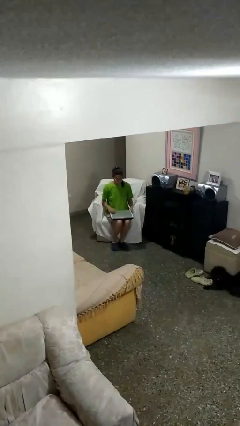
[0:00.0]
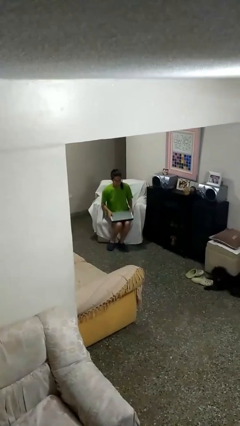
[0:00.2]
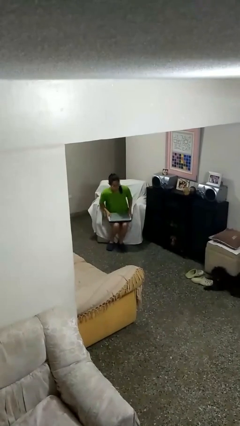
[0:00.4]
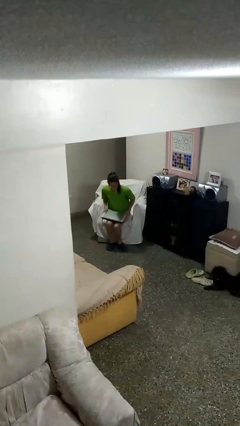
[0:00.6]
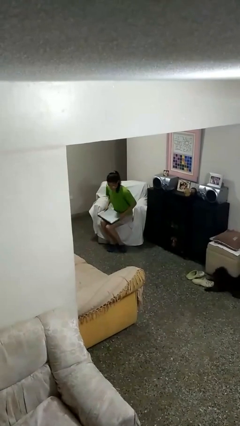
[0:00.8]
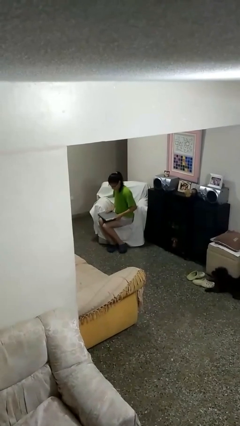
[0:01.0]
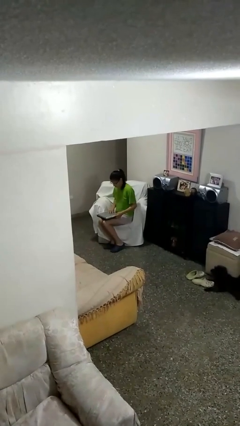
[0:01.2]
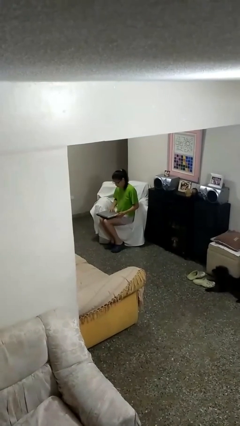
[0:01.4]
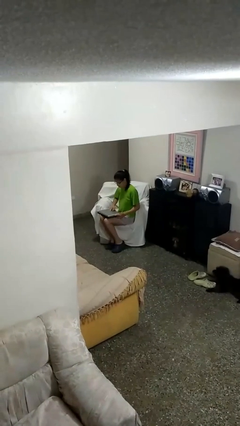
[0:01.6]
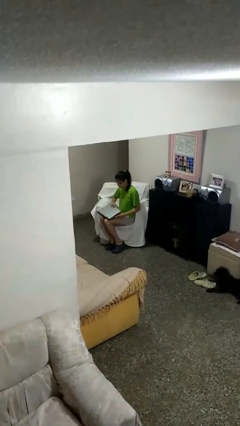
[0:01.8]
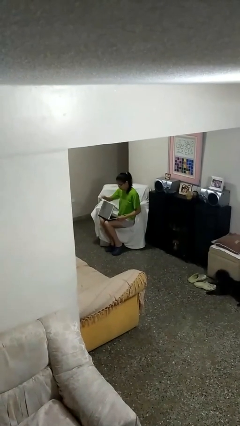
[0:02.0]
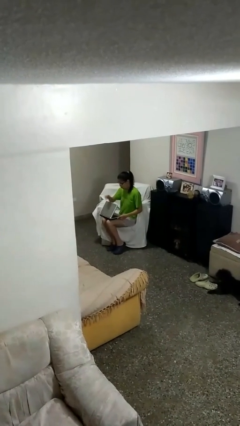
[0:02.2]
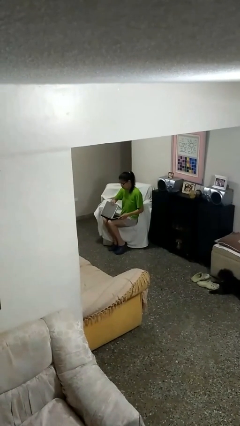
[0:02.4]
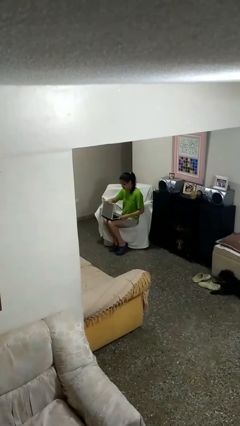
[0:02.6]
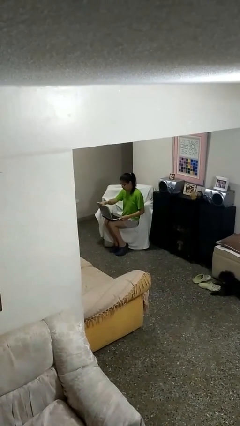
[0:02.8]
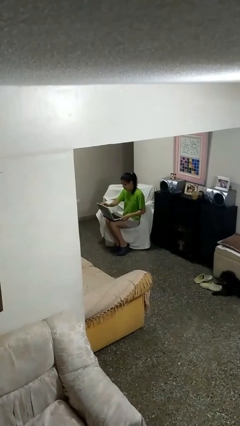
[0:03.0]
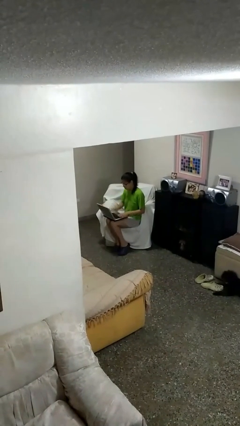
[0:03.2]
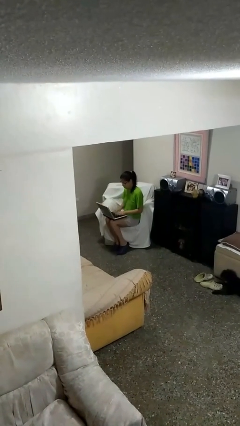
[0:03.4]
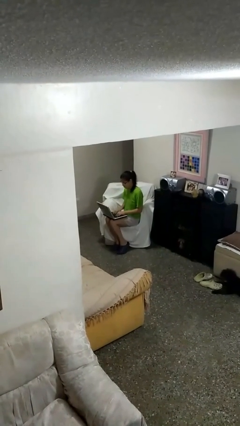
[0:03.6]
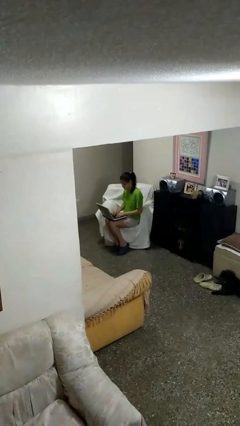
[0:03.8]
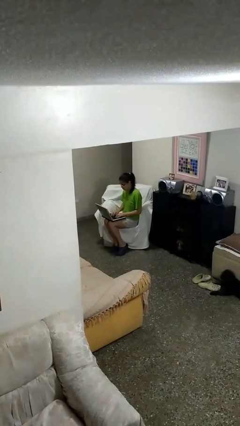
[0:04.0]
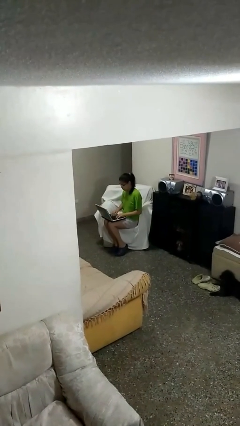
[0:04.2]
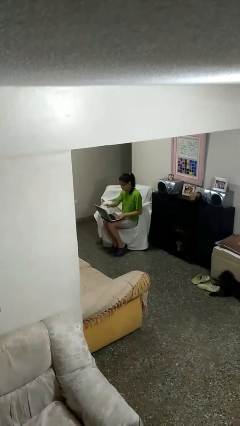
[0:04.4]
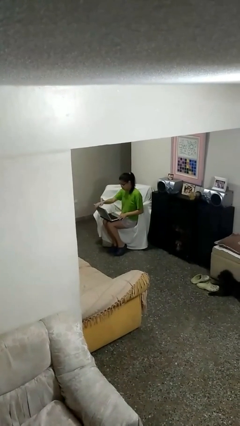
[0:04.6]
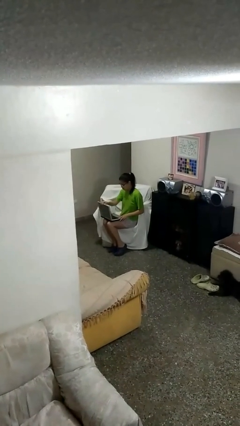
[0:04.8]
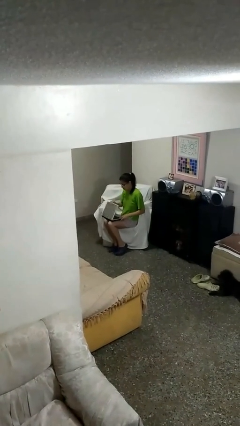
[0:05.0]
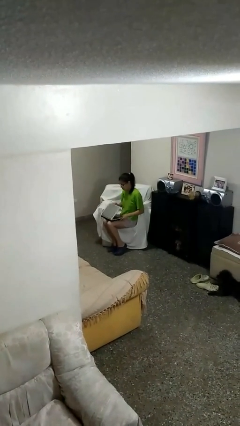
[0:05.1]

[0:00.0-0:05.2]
person interacts with laptop

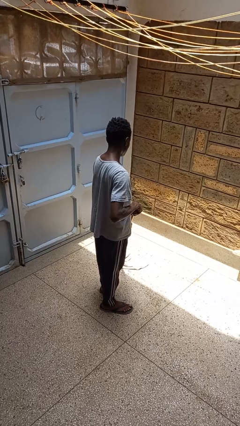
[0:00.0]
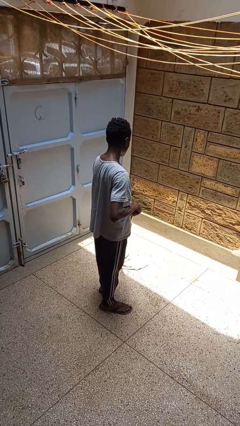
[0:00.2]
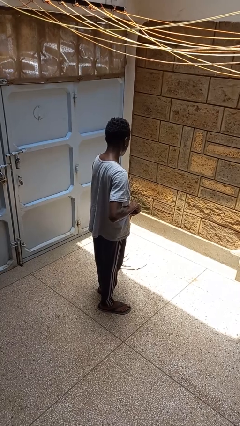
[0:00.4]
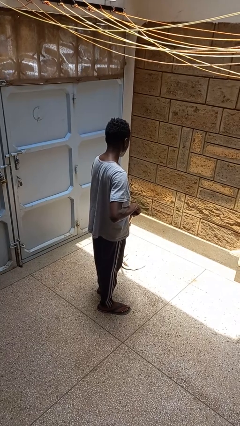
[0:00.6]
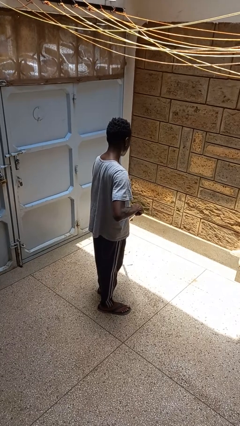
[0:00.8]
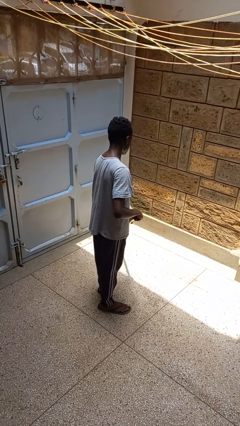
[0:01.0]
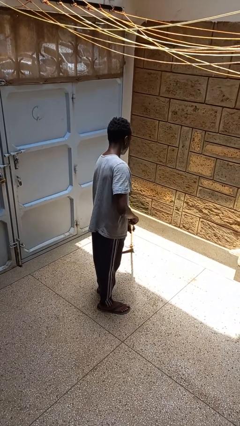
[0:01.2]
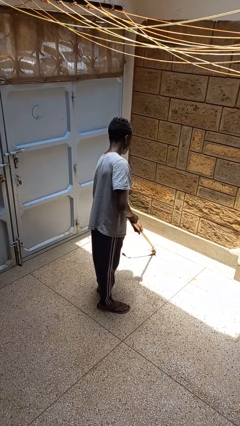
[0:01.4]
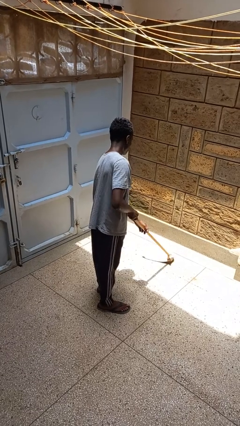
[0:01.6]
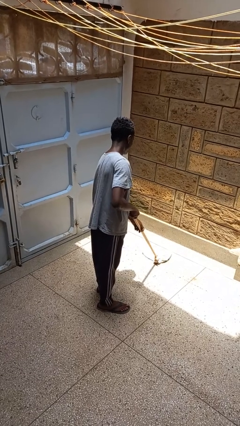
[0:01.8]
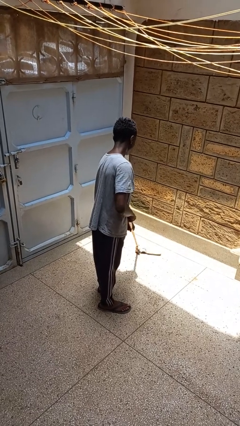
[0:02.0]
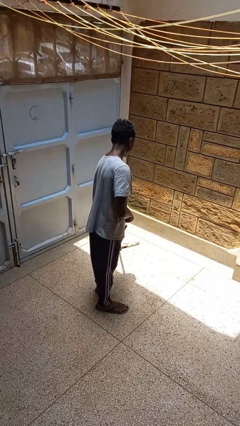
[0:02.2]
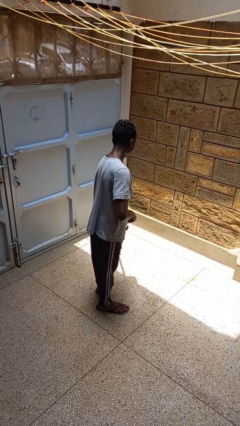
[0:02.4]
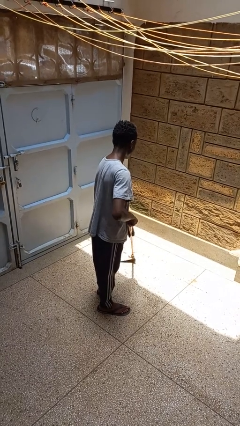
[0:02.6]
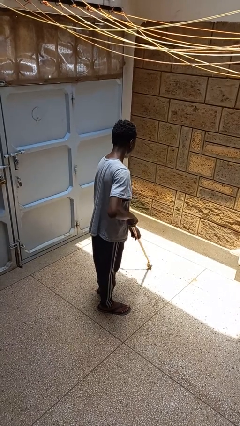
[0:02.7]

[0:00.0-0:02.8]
person mops

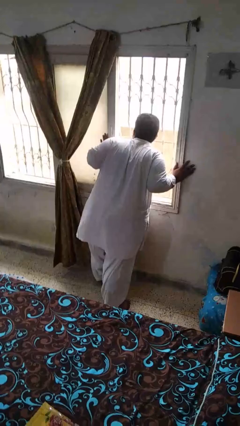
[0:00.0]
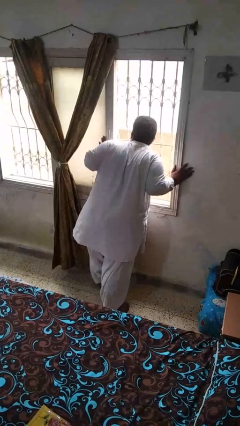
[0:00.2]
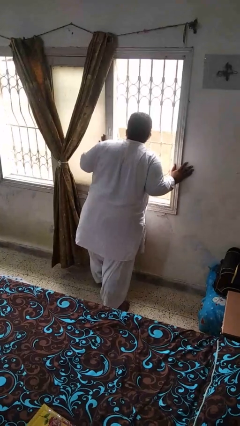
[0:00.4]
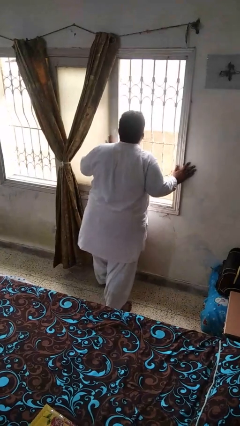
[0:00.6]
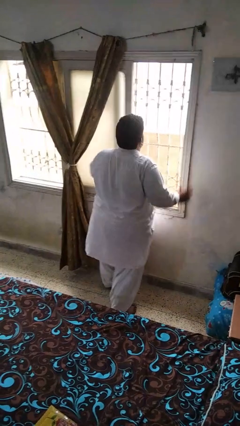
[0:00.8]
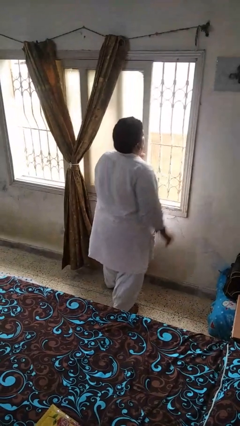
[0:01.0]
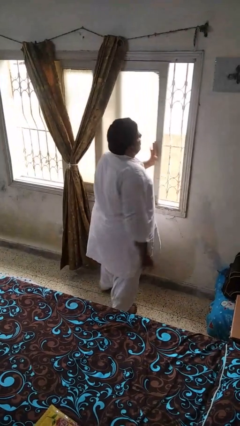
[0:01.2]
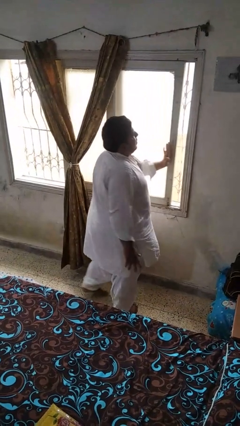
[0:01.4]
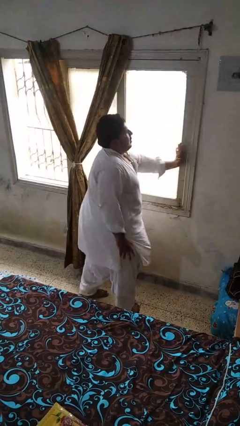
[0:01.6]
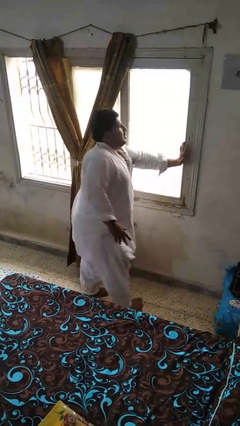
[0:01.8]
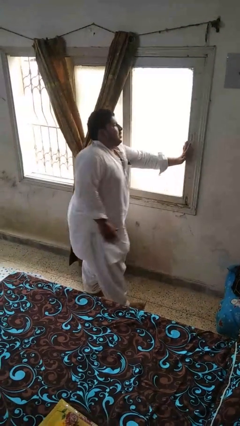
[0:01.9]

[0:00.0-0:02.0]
person closes home window

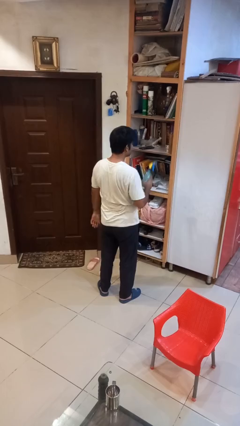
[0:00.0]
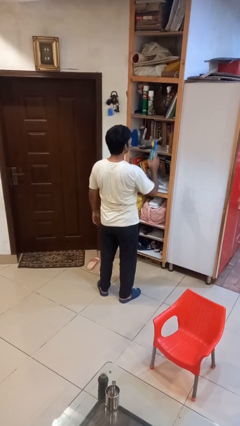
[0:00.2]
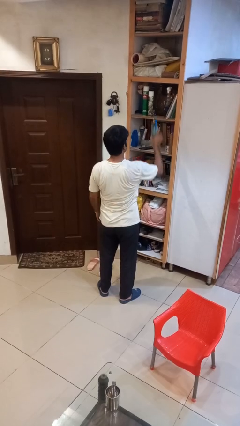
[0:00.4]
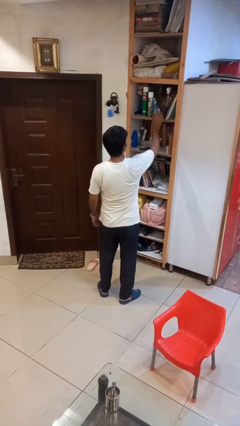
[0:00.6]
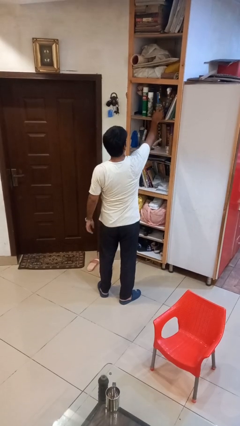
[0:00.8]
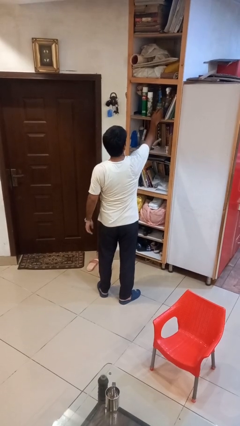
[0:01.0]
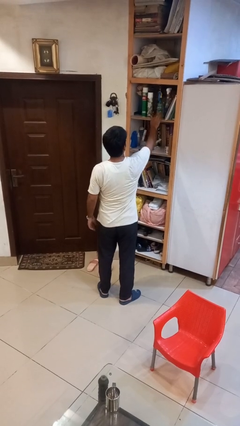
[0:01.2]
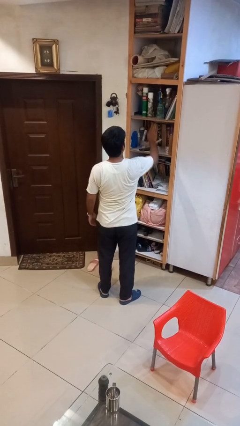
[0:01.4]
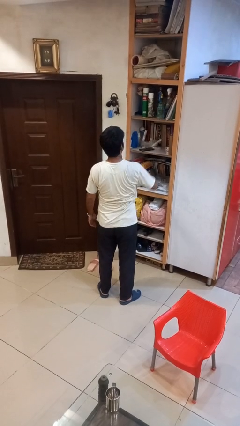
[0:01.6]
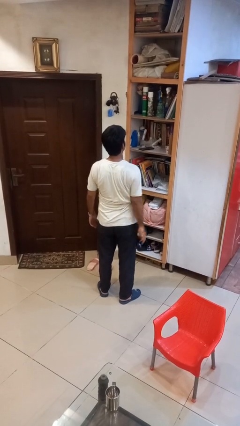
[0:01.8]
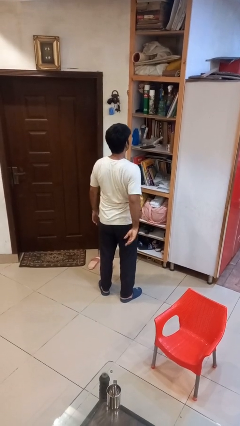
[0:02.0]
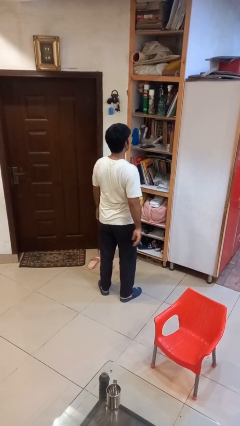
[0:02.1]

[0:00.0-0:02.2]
person puts down object on shelf

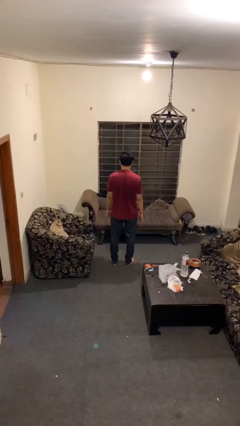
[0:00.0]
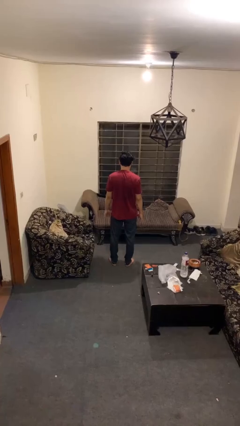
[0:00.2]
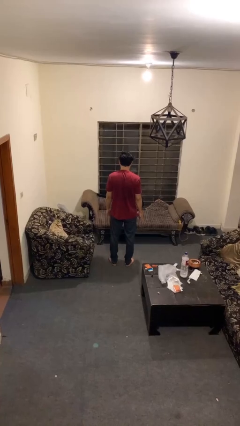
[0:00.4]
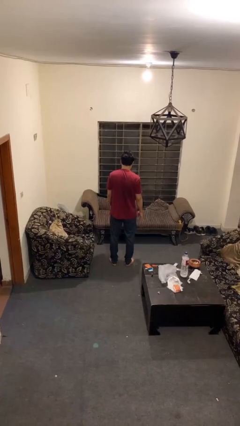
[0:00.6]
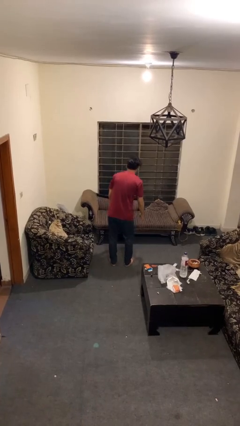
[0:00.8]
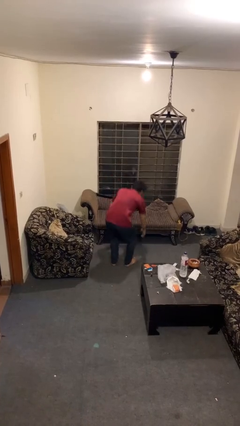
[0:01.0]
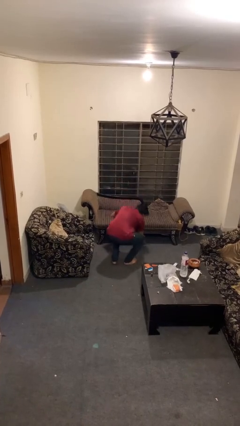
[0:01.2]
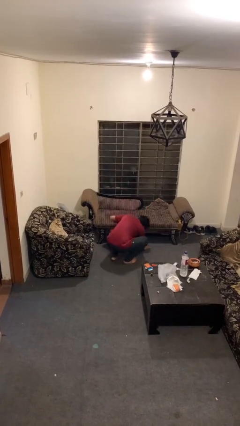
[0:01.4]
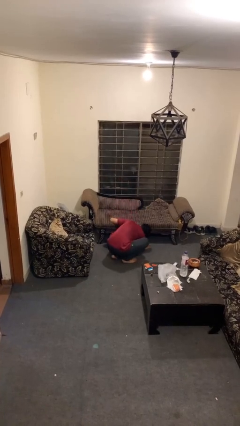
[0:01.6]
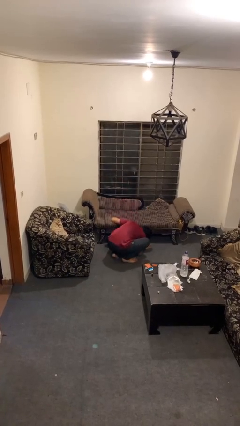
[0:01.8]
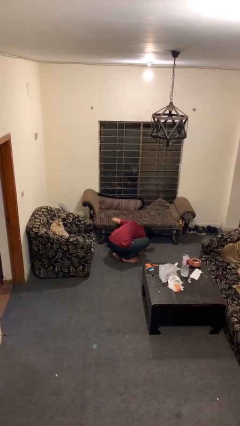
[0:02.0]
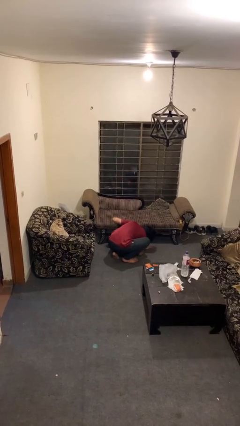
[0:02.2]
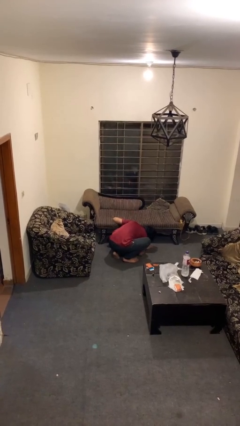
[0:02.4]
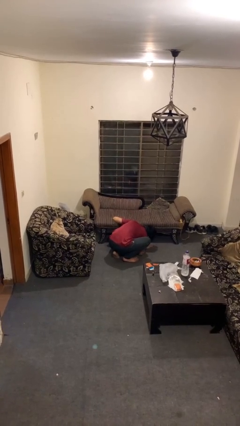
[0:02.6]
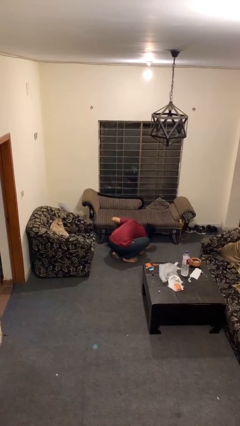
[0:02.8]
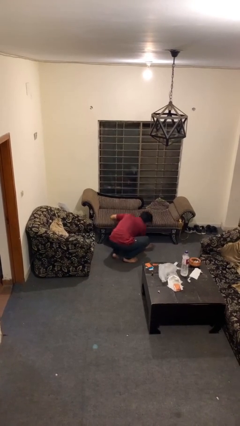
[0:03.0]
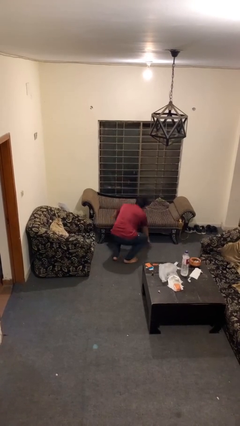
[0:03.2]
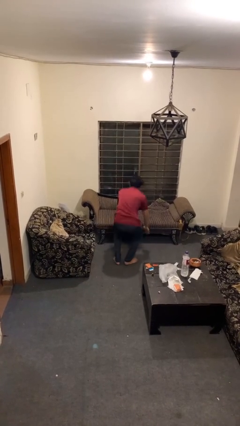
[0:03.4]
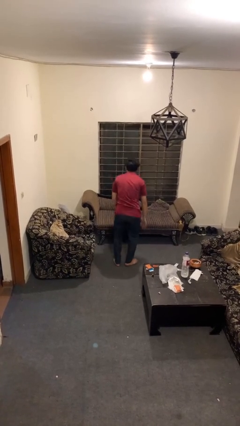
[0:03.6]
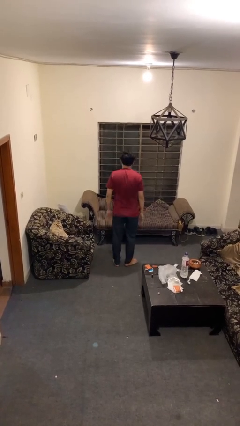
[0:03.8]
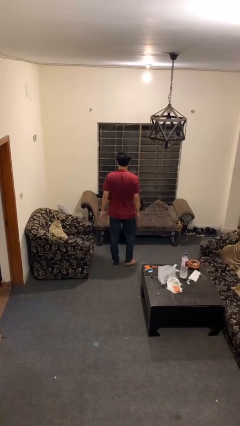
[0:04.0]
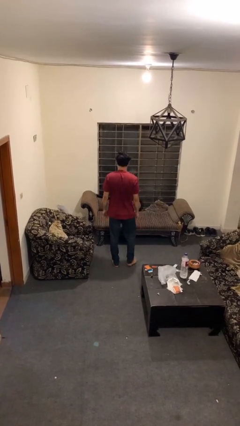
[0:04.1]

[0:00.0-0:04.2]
person searches under couch

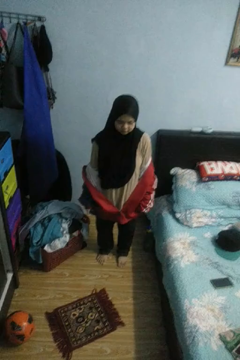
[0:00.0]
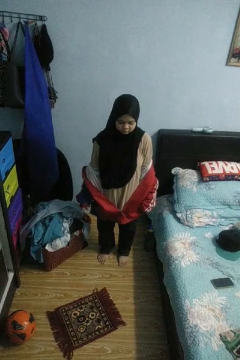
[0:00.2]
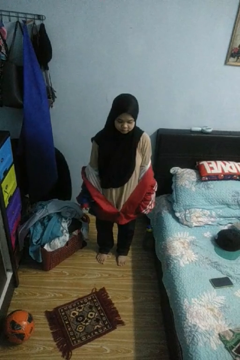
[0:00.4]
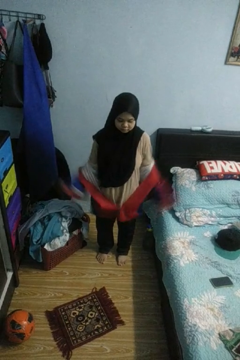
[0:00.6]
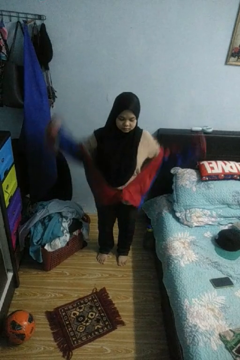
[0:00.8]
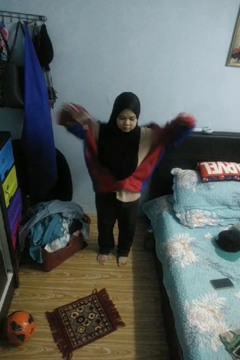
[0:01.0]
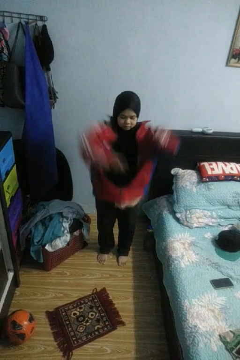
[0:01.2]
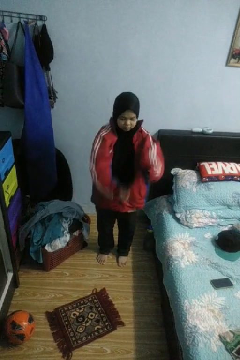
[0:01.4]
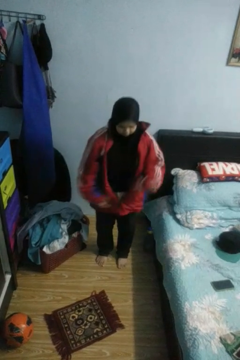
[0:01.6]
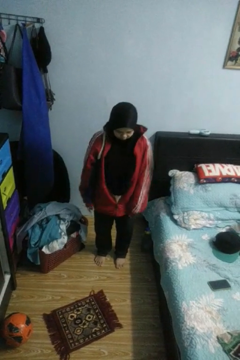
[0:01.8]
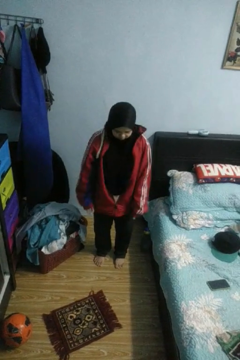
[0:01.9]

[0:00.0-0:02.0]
person puts on jacket
